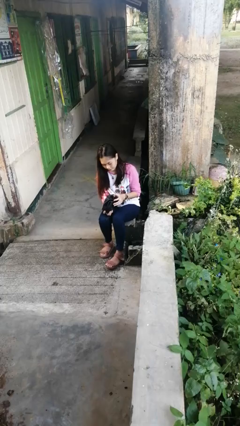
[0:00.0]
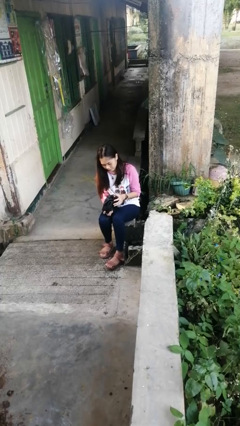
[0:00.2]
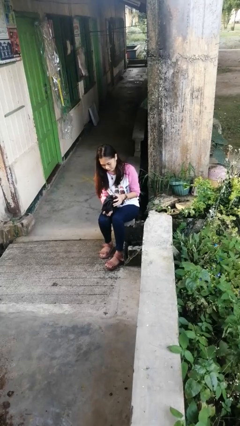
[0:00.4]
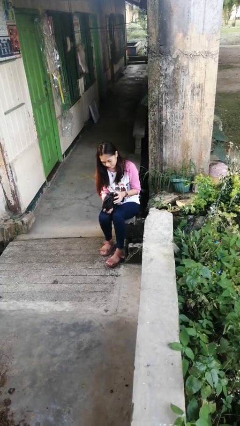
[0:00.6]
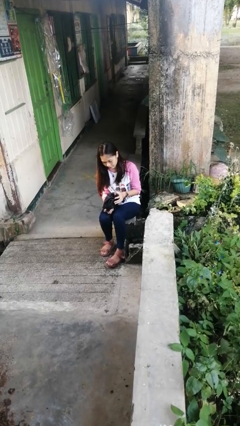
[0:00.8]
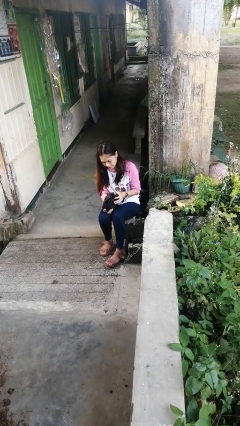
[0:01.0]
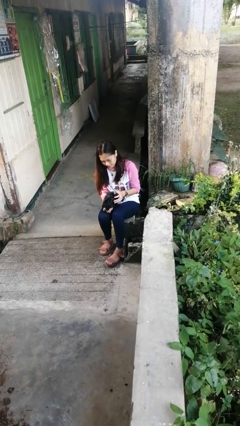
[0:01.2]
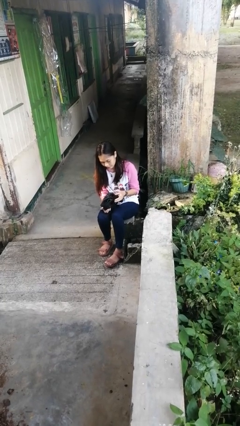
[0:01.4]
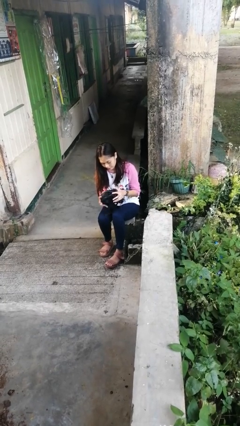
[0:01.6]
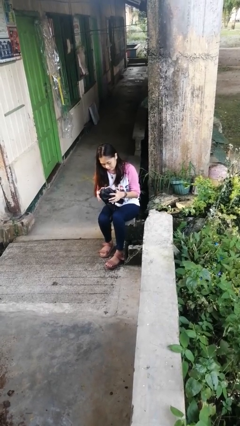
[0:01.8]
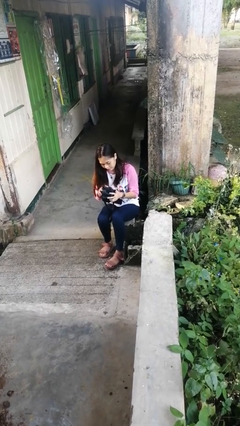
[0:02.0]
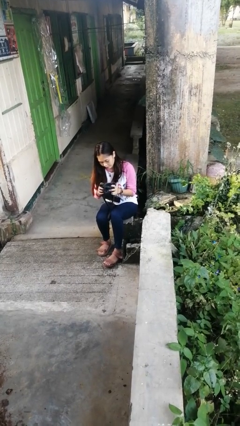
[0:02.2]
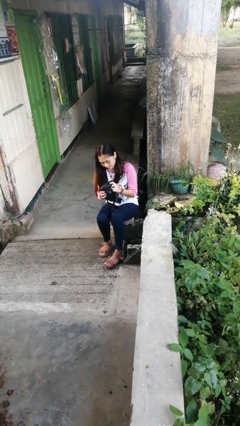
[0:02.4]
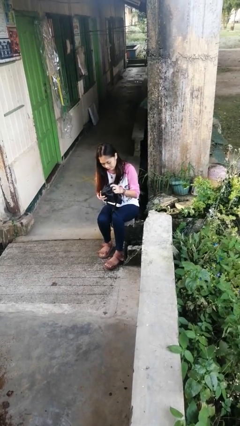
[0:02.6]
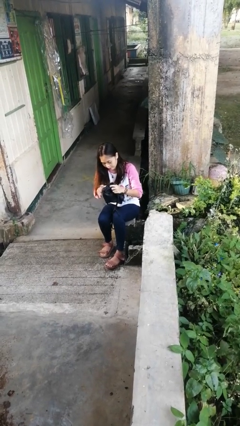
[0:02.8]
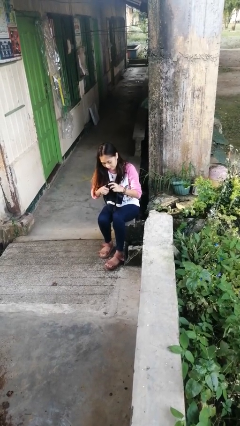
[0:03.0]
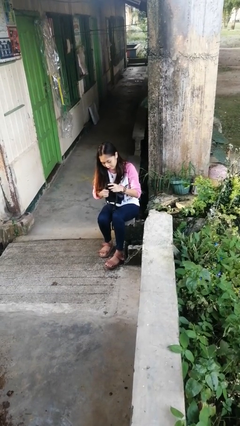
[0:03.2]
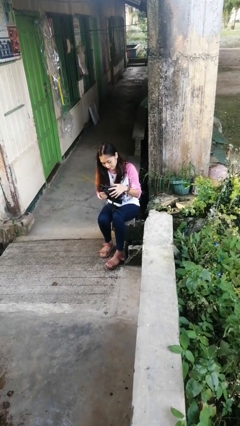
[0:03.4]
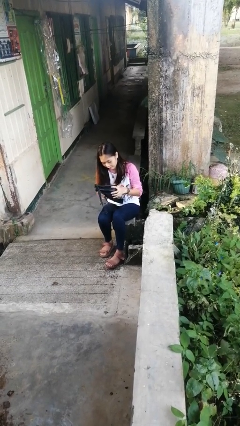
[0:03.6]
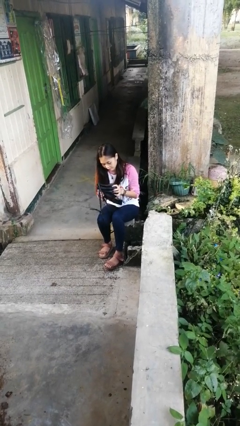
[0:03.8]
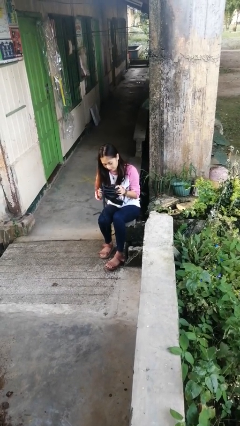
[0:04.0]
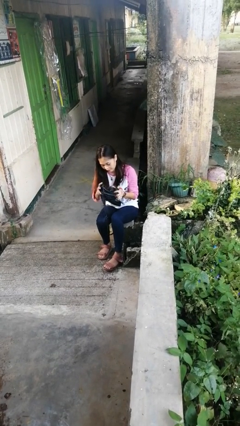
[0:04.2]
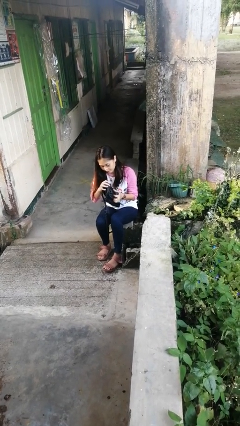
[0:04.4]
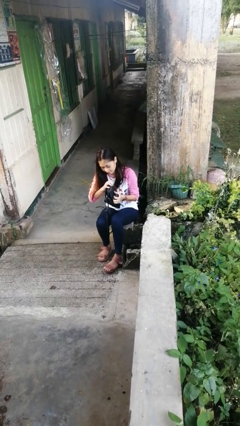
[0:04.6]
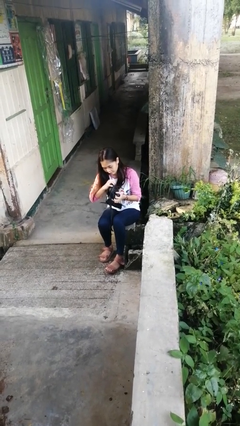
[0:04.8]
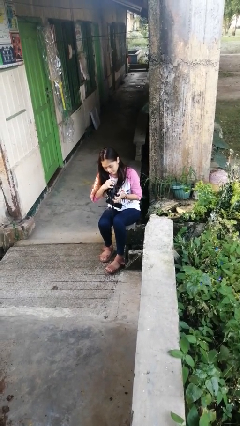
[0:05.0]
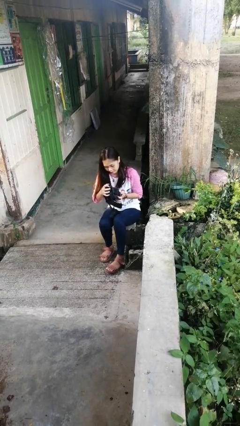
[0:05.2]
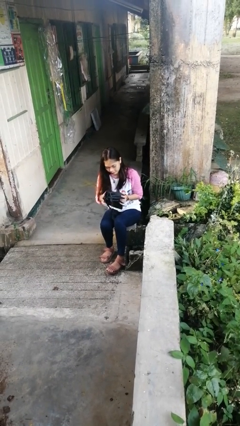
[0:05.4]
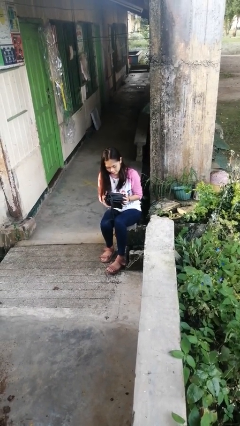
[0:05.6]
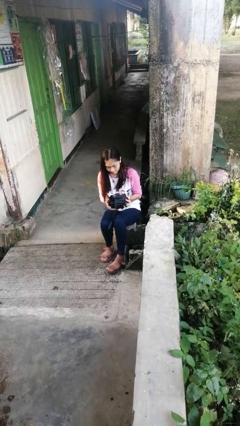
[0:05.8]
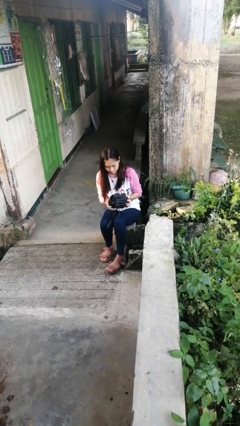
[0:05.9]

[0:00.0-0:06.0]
person squeezes object

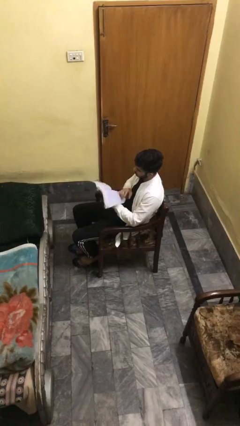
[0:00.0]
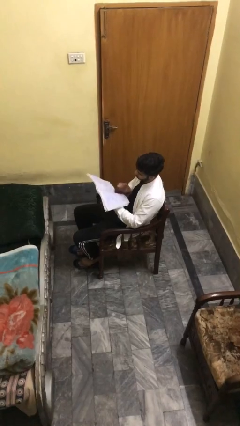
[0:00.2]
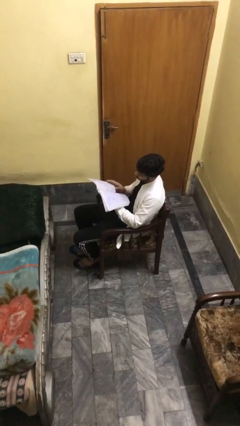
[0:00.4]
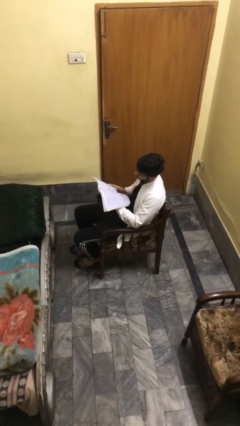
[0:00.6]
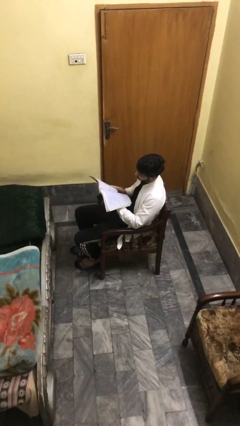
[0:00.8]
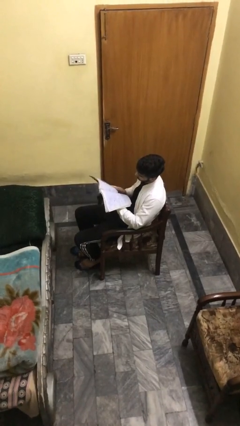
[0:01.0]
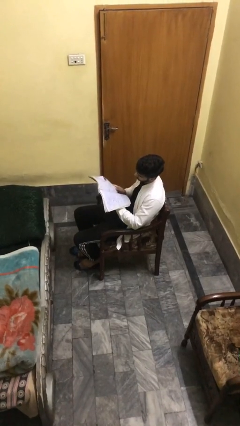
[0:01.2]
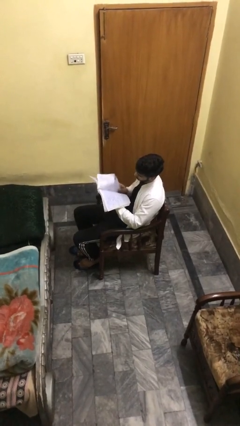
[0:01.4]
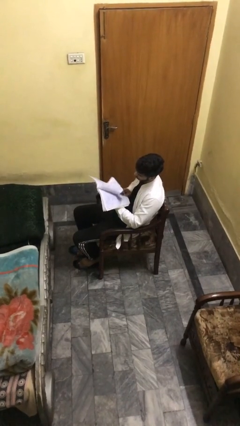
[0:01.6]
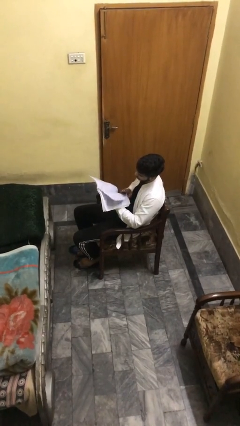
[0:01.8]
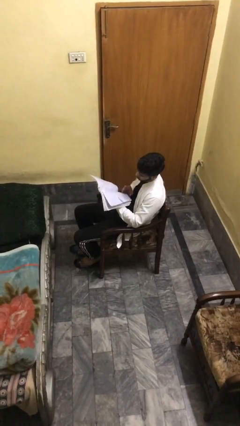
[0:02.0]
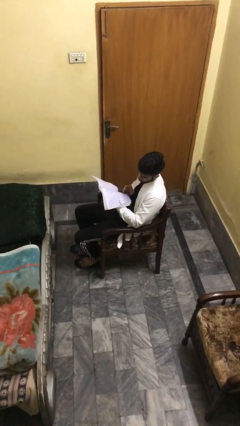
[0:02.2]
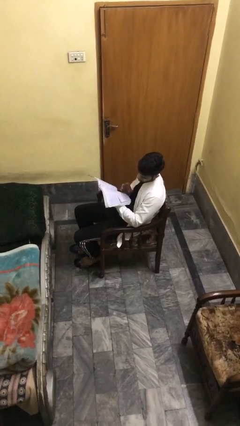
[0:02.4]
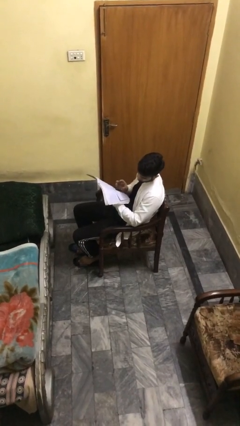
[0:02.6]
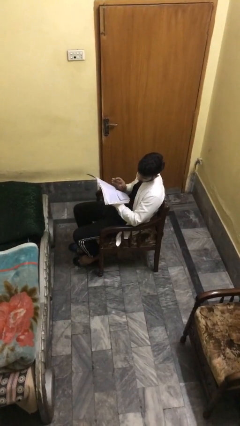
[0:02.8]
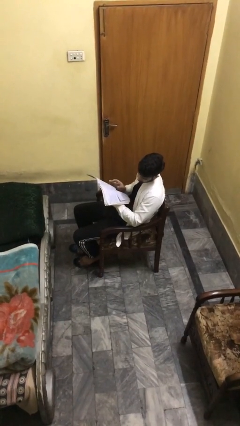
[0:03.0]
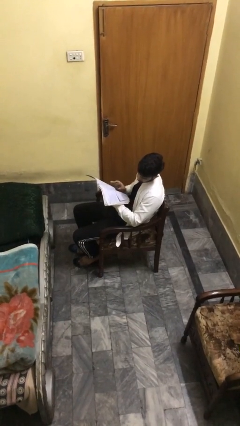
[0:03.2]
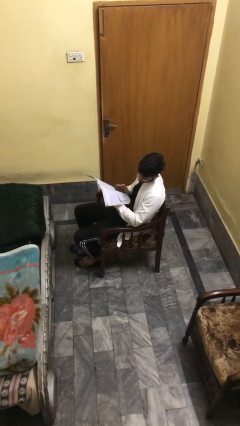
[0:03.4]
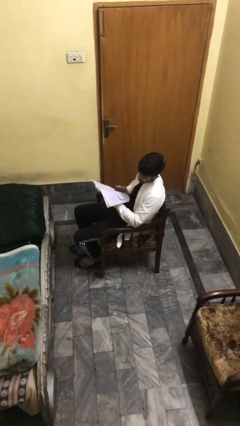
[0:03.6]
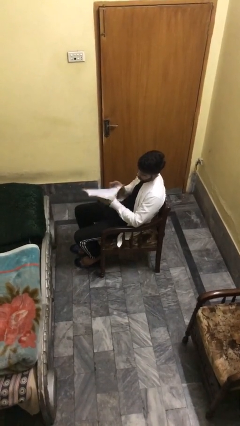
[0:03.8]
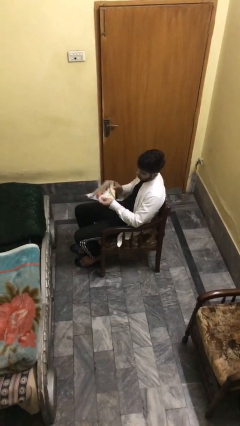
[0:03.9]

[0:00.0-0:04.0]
person reads document

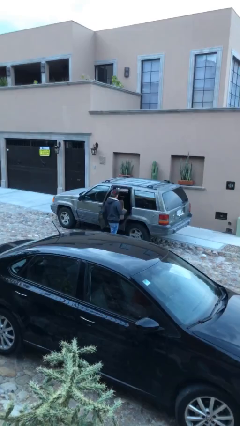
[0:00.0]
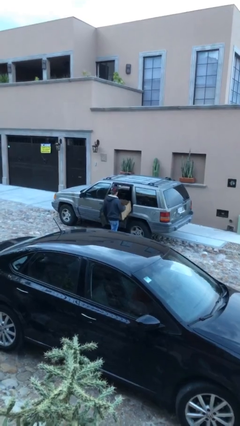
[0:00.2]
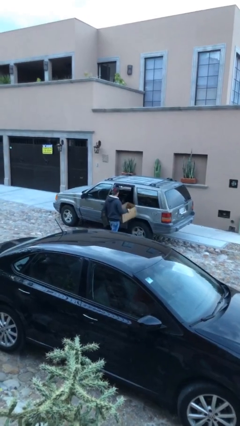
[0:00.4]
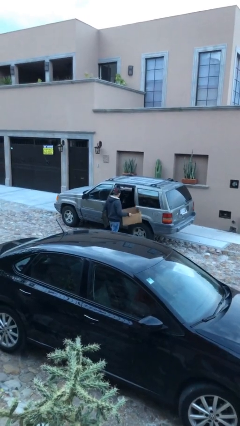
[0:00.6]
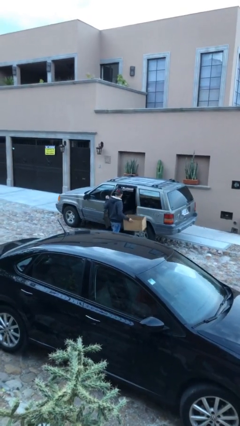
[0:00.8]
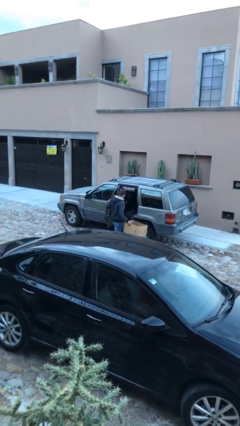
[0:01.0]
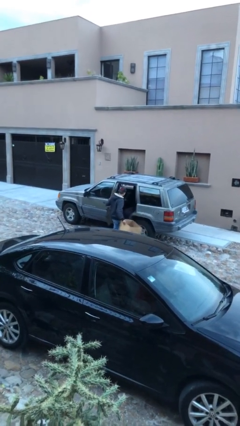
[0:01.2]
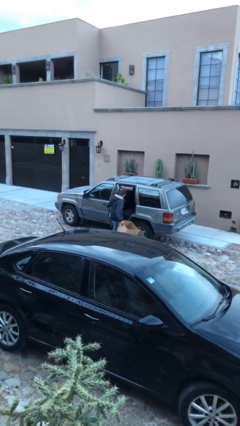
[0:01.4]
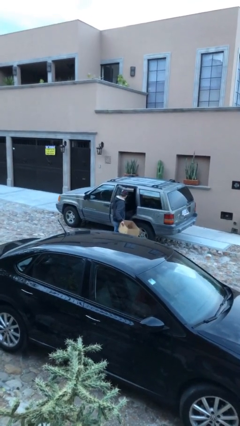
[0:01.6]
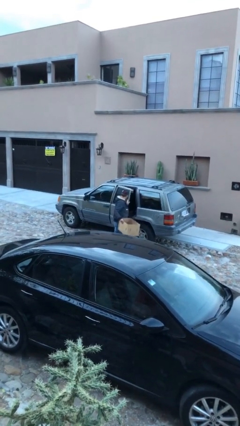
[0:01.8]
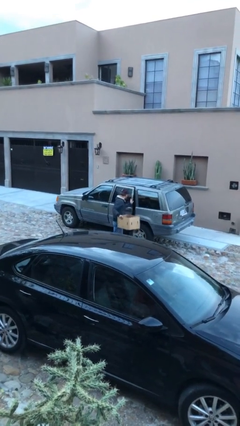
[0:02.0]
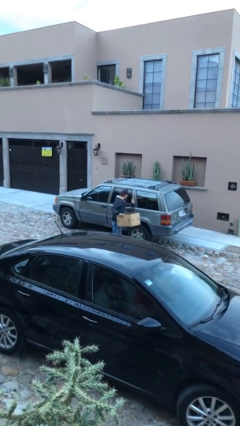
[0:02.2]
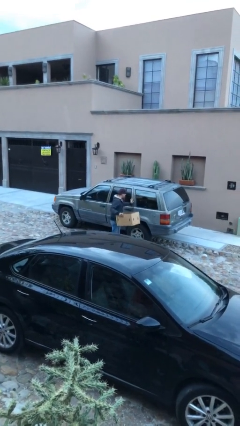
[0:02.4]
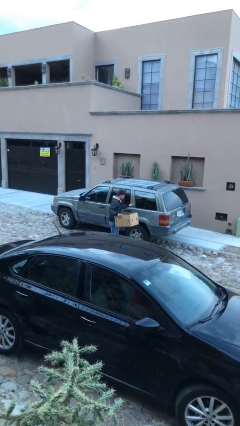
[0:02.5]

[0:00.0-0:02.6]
person closes car door

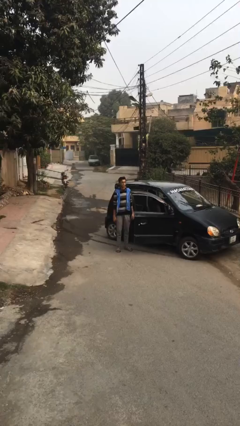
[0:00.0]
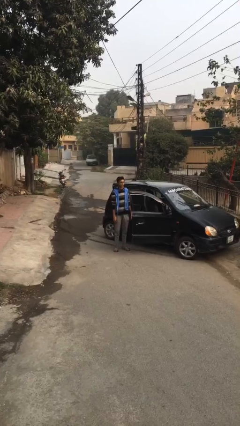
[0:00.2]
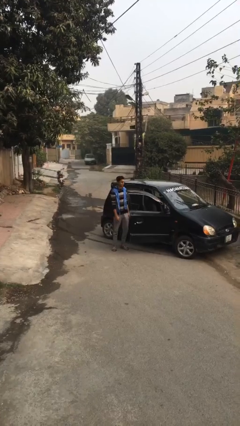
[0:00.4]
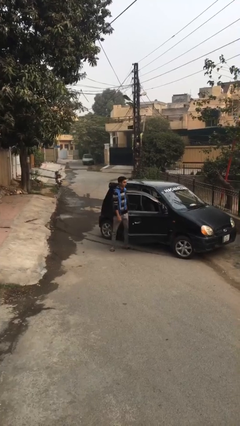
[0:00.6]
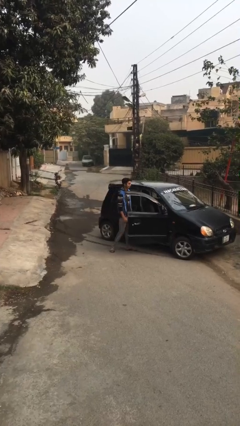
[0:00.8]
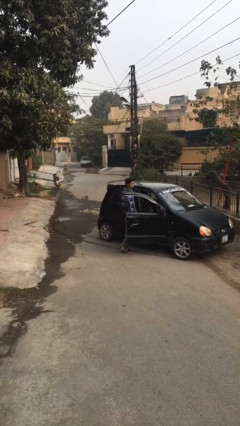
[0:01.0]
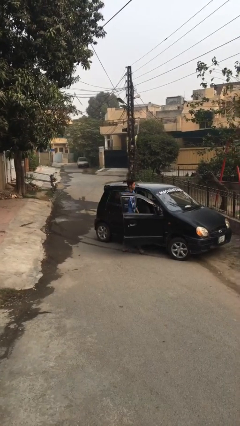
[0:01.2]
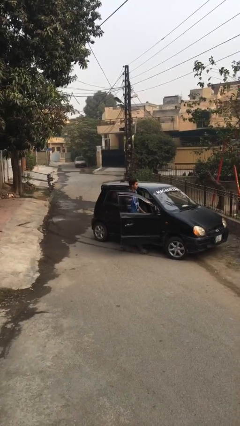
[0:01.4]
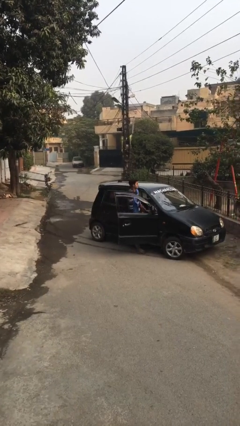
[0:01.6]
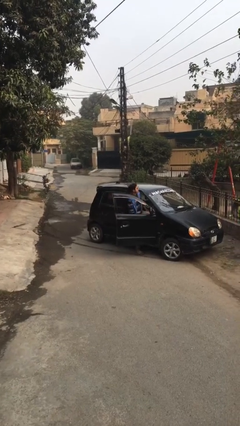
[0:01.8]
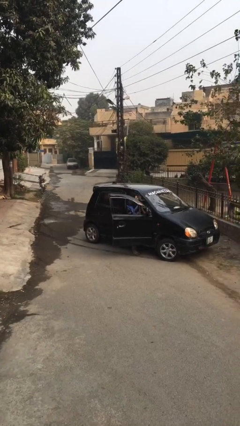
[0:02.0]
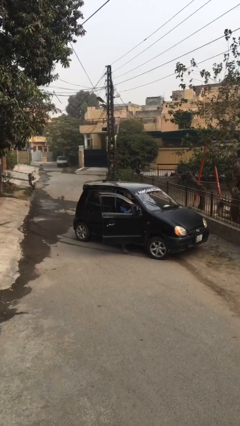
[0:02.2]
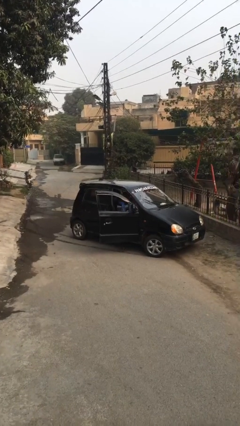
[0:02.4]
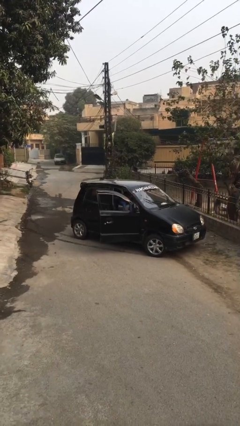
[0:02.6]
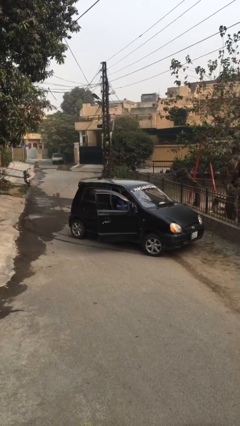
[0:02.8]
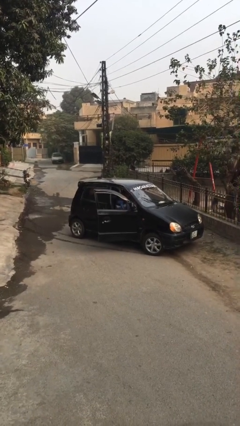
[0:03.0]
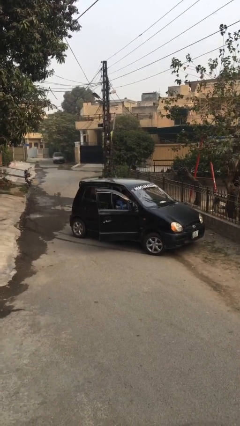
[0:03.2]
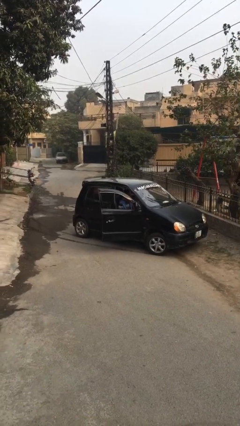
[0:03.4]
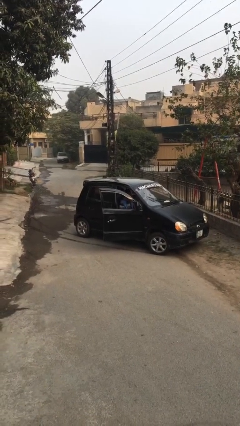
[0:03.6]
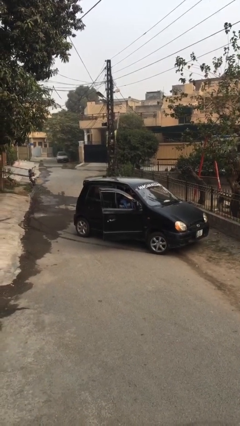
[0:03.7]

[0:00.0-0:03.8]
person enters car

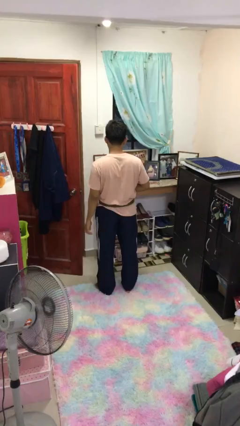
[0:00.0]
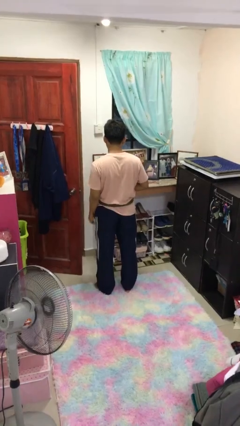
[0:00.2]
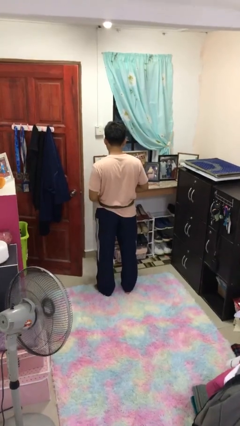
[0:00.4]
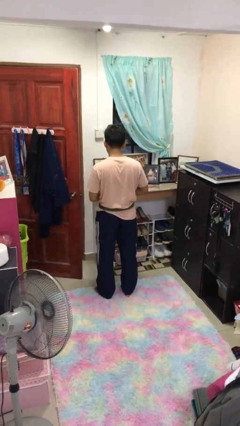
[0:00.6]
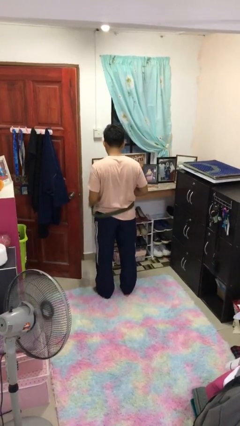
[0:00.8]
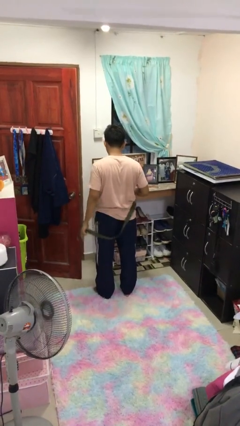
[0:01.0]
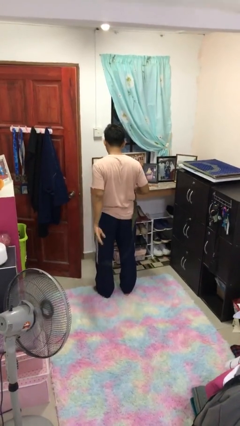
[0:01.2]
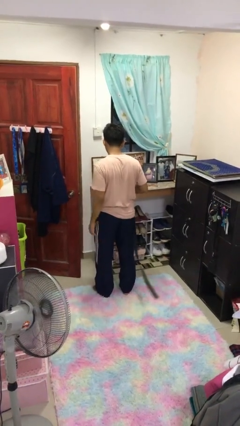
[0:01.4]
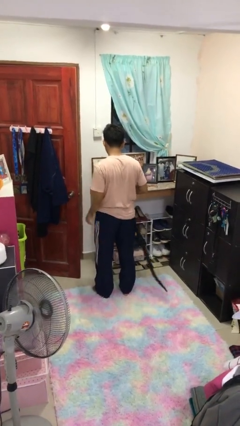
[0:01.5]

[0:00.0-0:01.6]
person takes off belt
